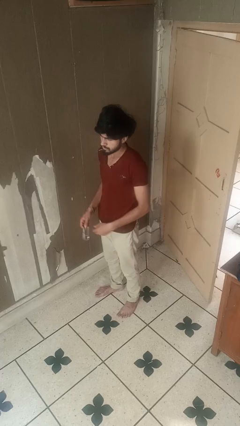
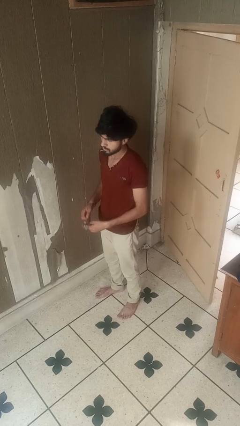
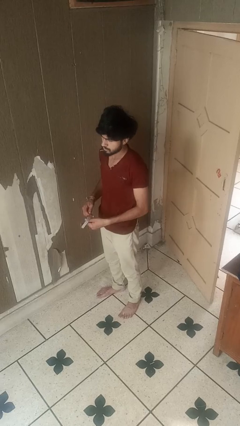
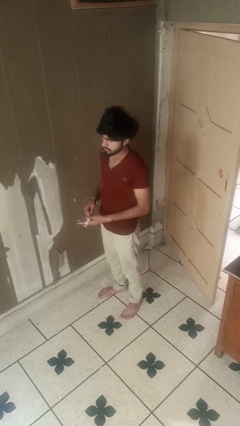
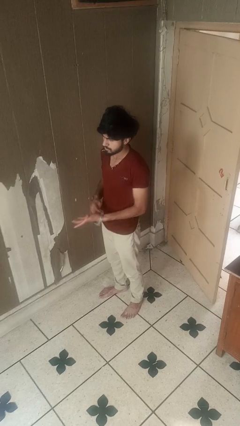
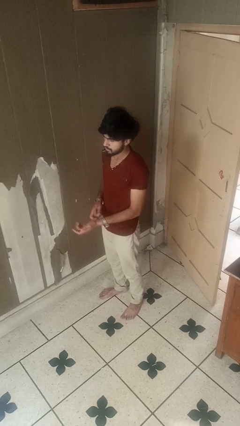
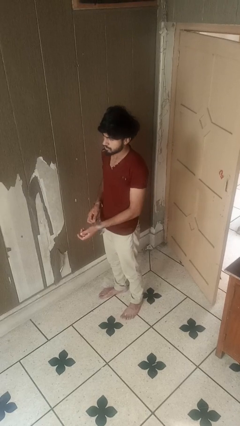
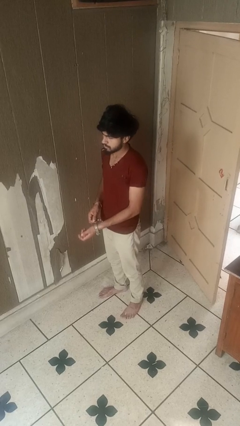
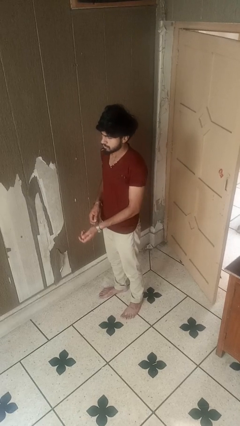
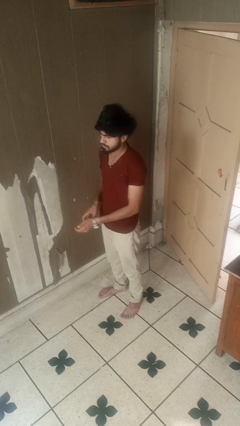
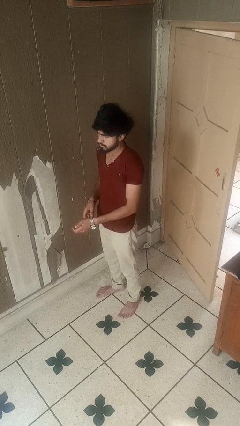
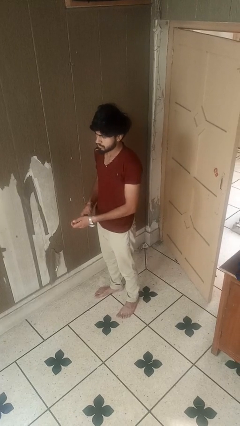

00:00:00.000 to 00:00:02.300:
person puts on wristwatch

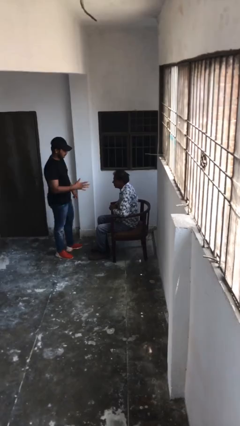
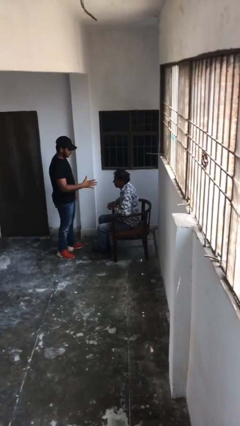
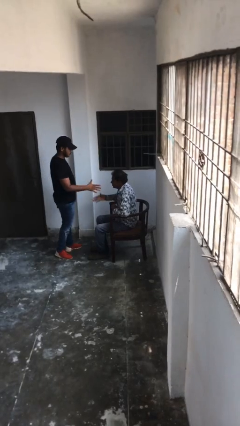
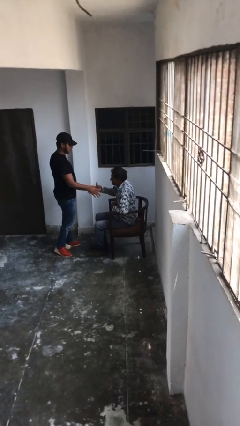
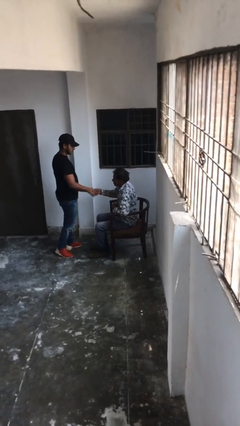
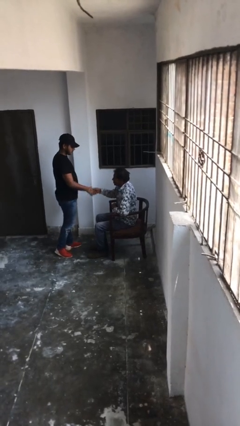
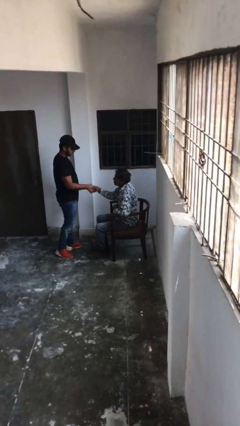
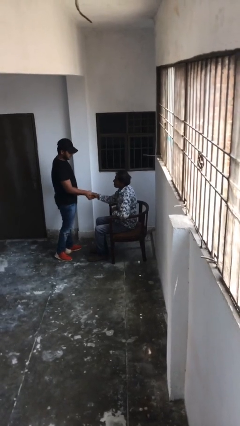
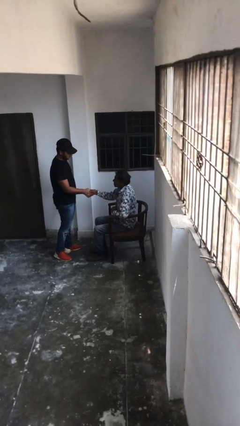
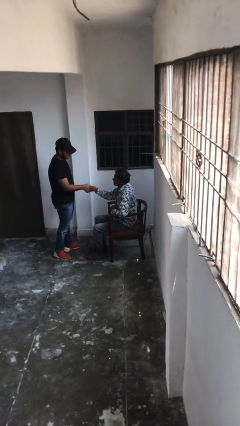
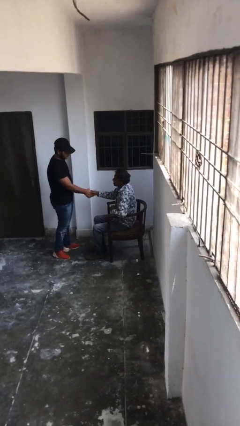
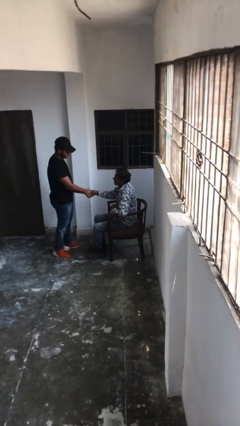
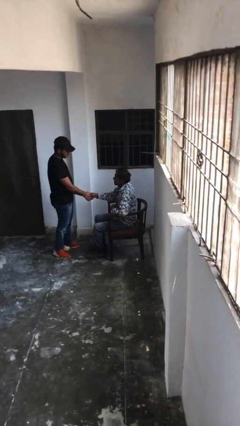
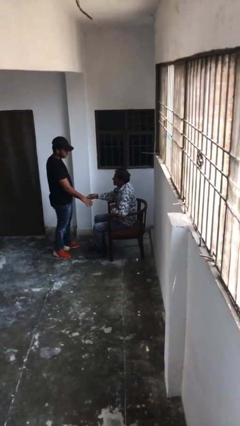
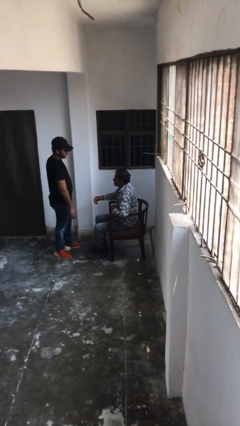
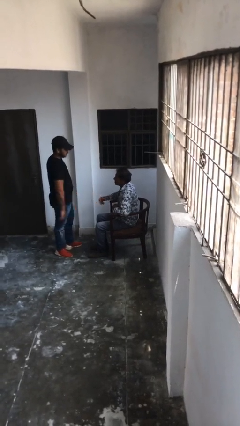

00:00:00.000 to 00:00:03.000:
person shakes hand

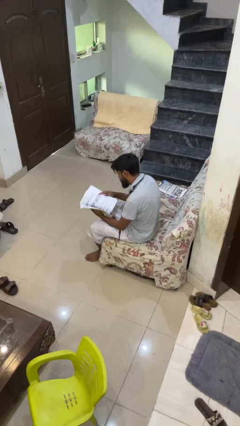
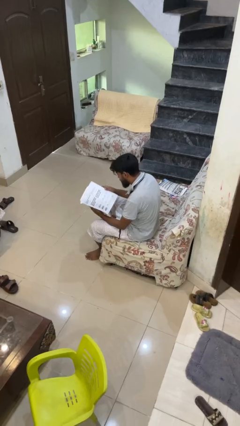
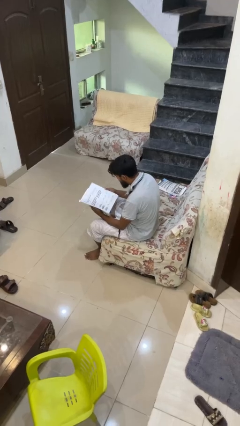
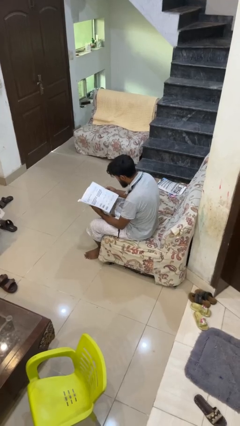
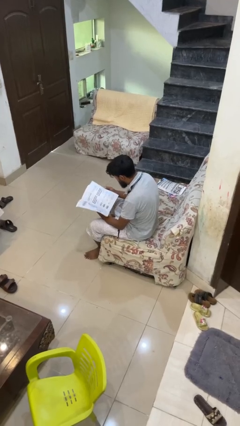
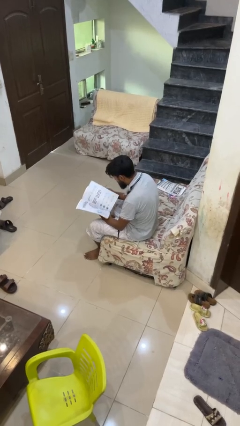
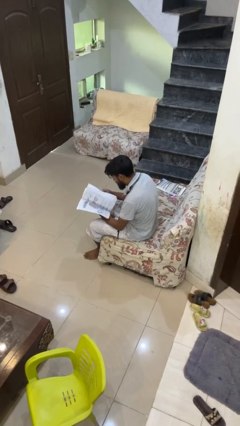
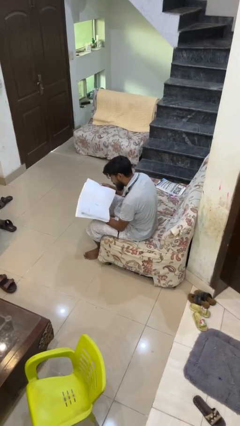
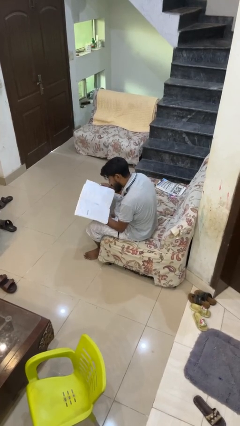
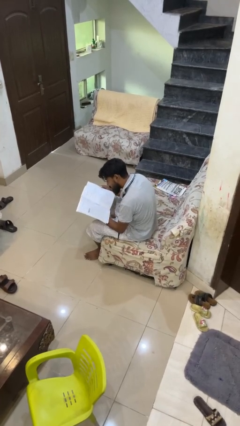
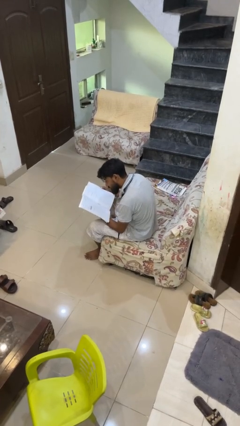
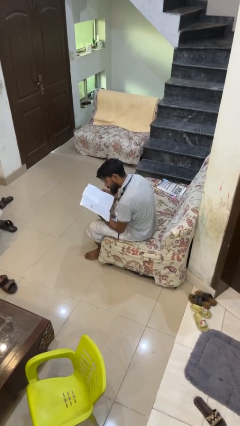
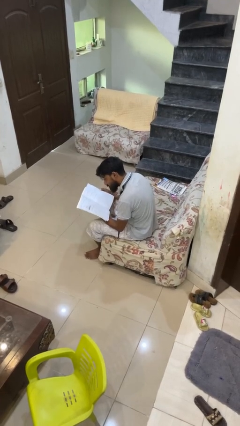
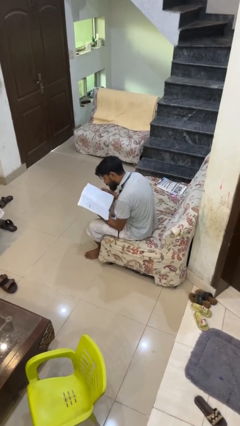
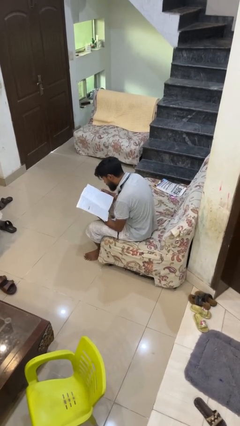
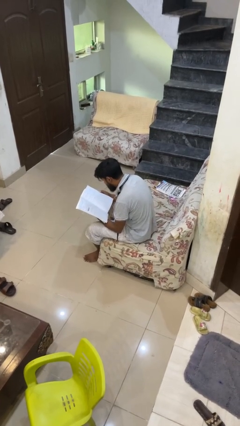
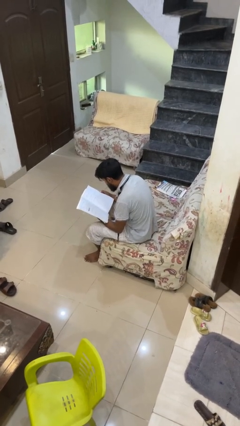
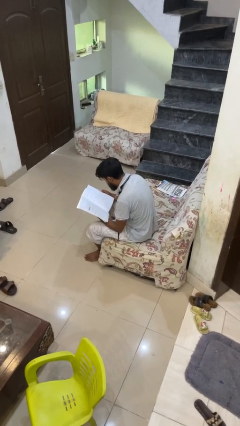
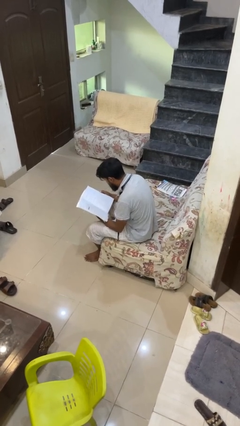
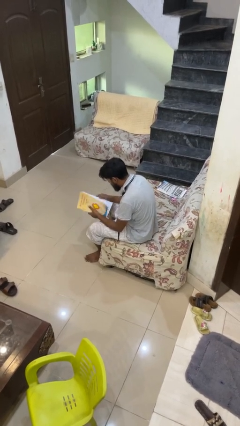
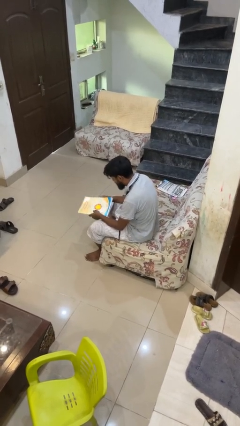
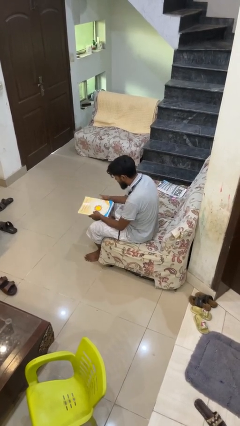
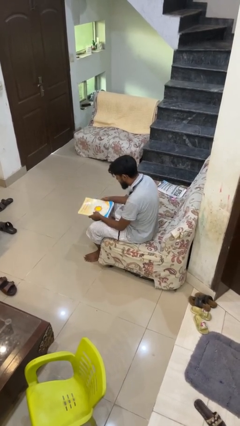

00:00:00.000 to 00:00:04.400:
person reads book

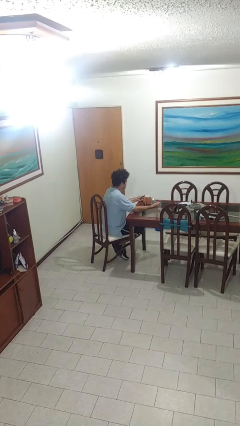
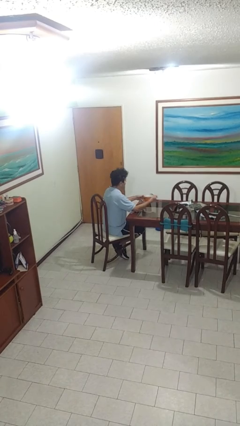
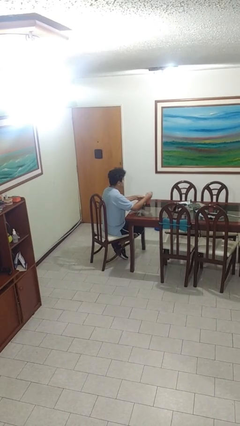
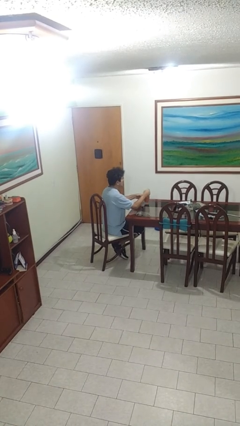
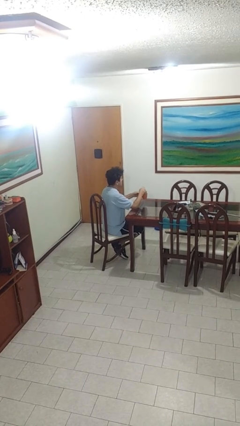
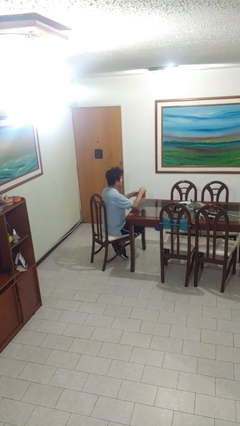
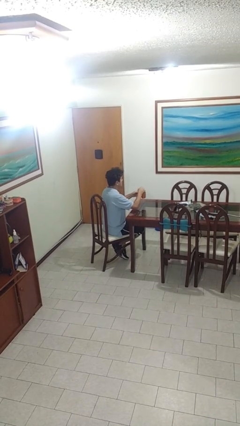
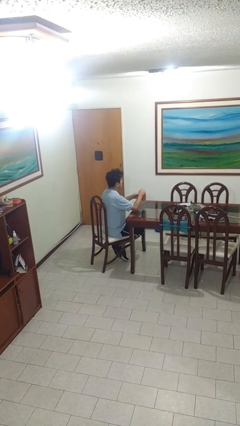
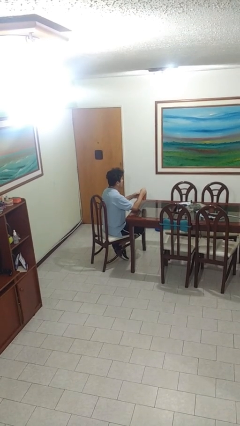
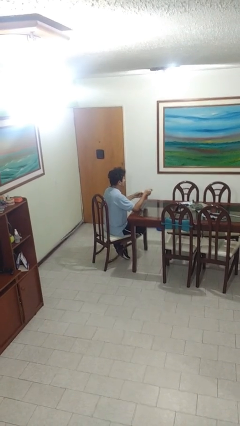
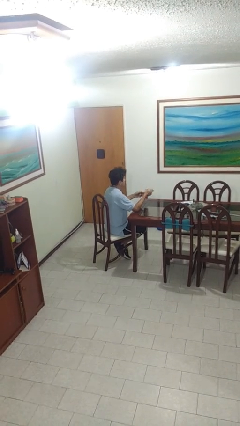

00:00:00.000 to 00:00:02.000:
person stirs mug

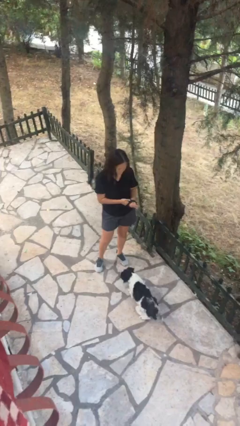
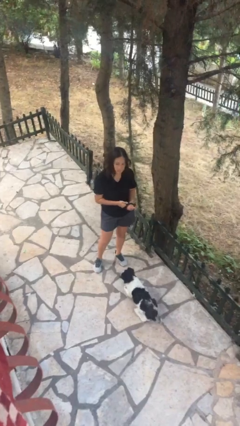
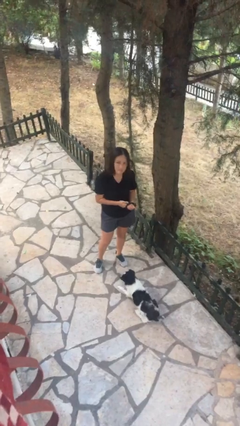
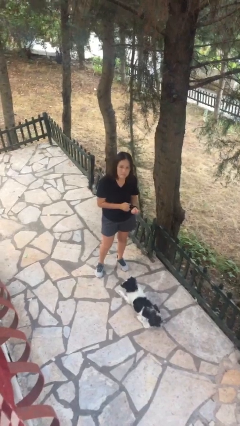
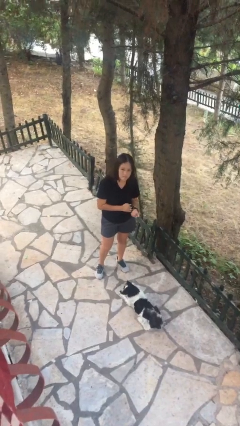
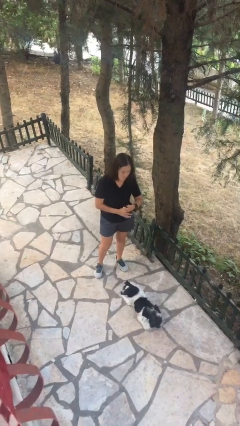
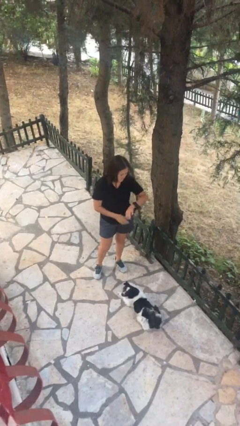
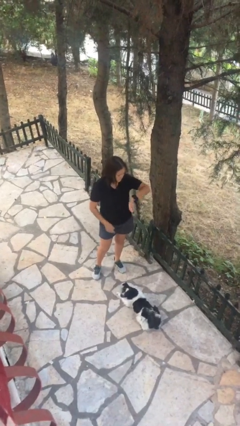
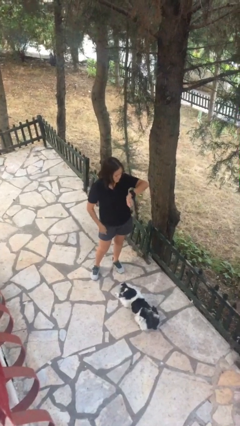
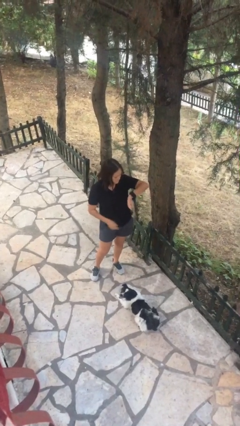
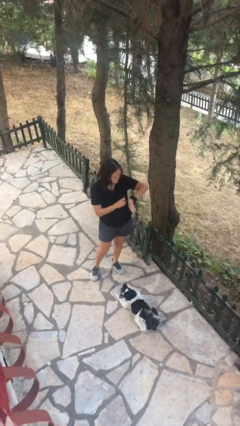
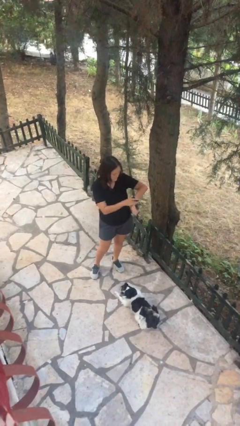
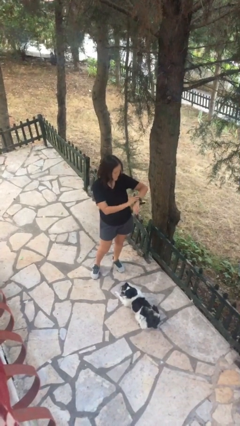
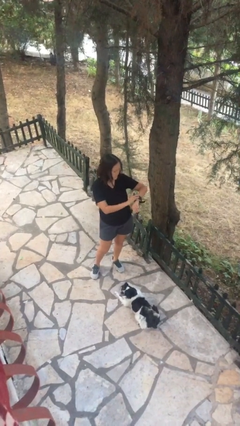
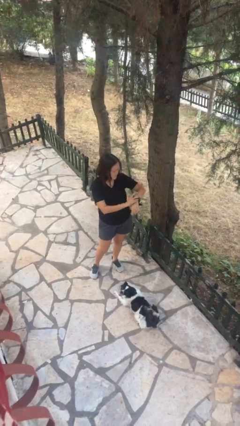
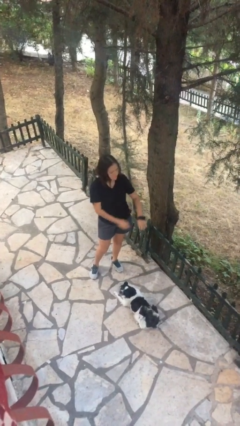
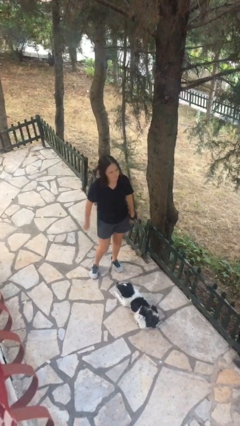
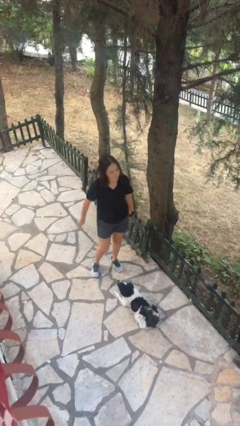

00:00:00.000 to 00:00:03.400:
person looks at wristwatch

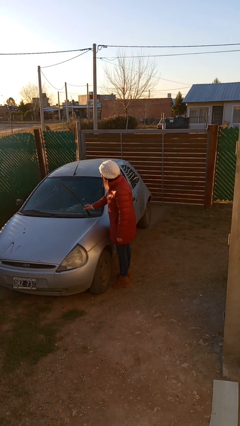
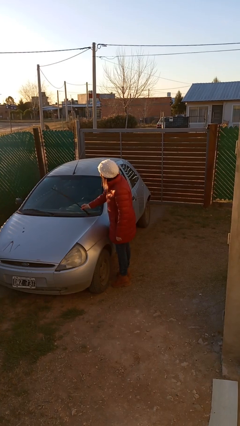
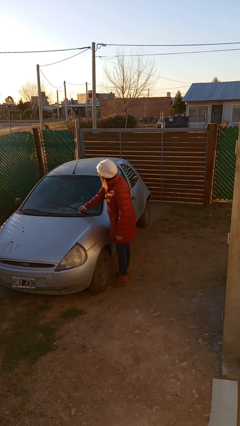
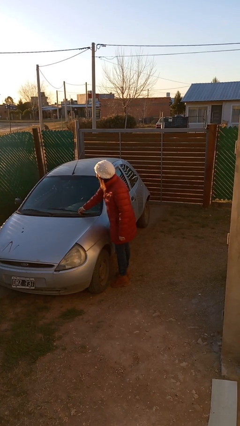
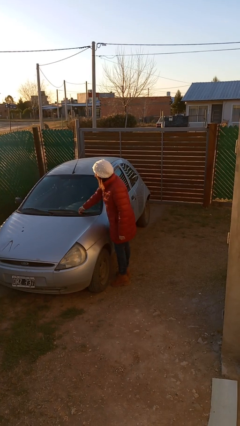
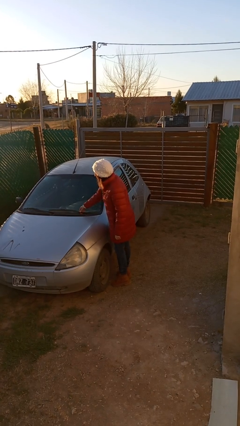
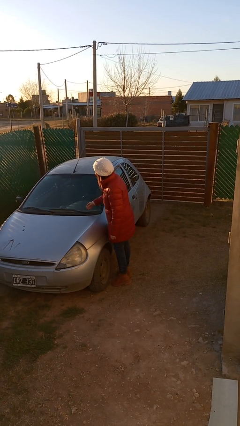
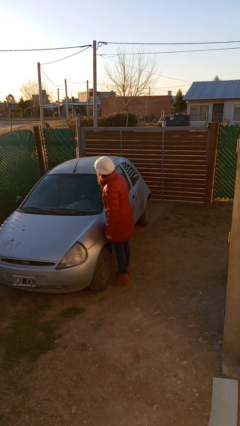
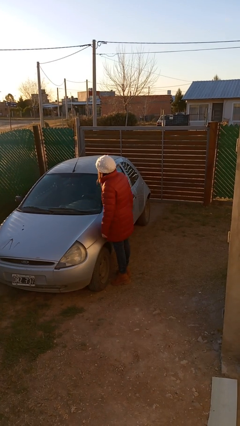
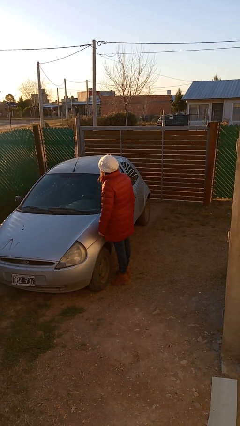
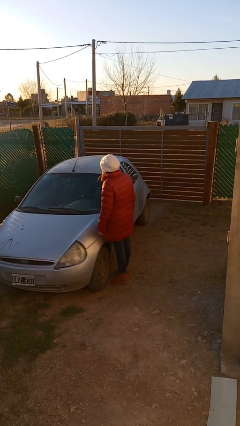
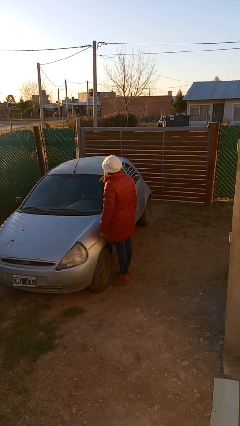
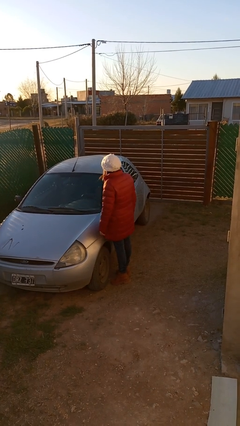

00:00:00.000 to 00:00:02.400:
person flips down car wipers
